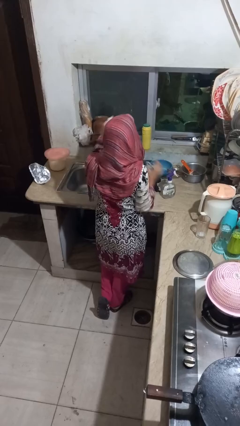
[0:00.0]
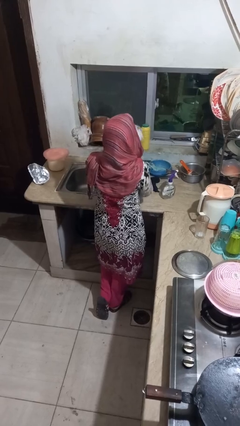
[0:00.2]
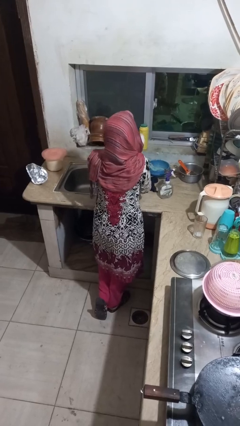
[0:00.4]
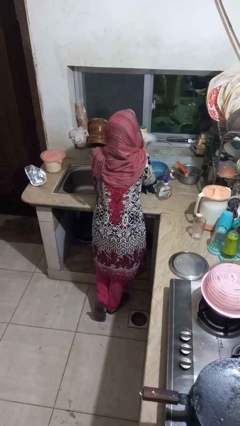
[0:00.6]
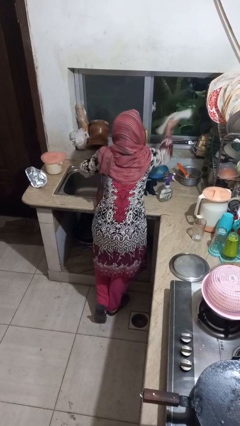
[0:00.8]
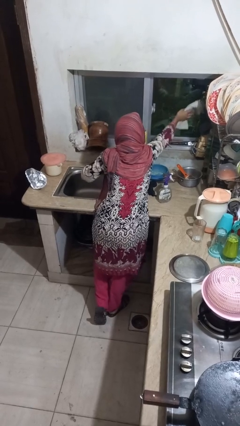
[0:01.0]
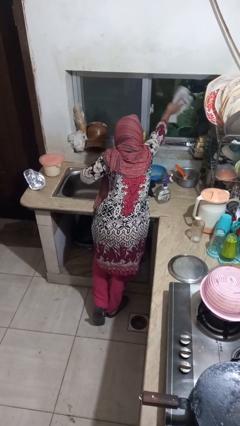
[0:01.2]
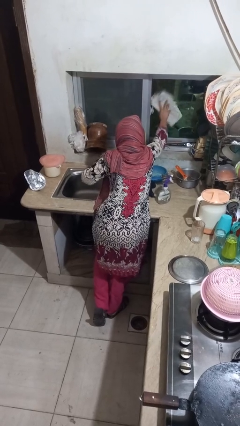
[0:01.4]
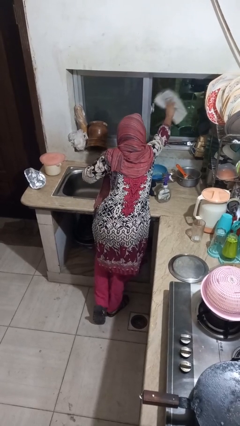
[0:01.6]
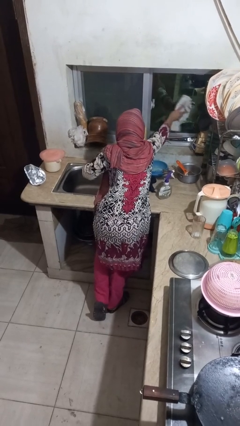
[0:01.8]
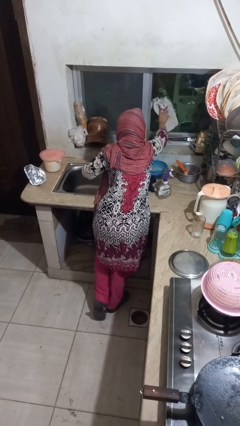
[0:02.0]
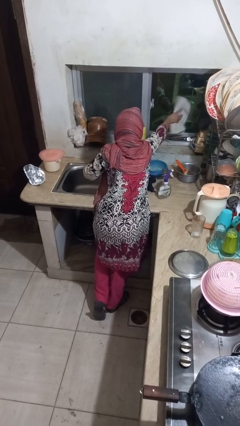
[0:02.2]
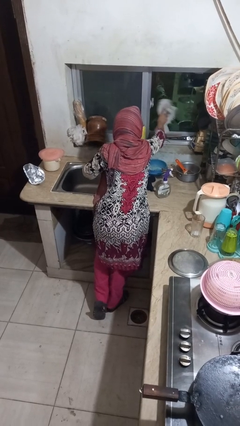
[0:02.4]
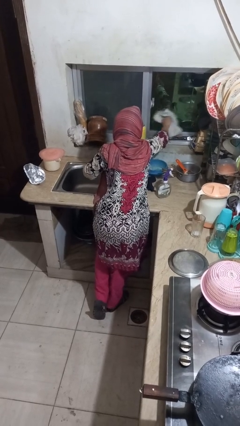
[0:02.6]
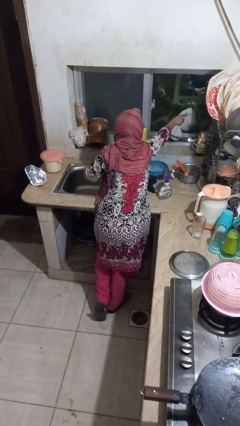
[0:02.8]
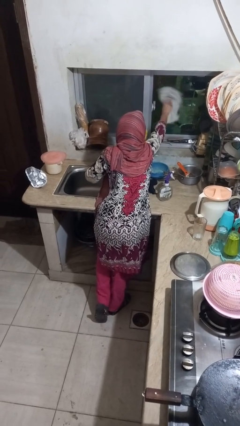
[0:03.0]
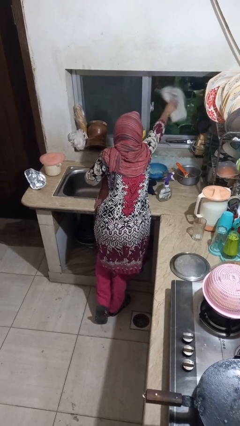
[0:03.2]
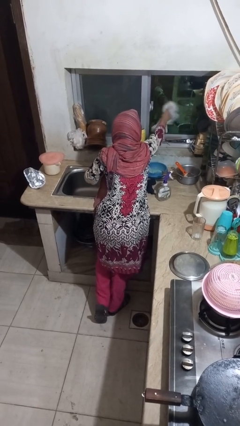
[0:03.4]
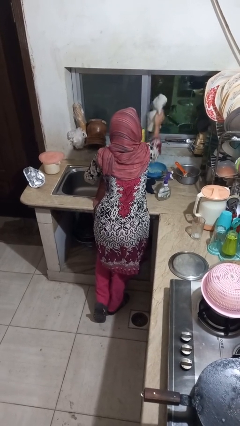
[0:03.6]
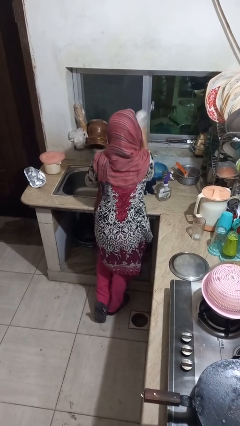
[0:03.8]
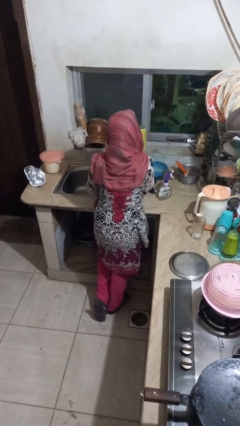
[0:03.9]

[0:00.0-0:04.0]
person washes window

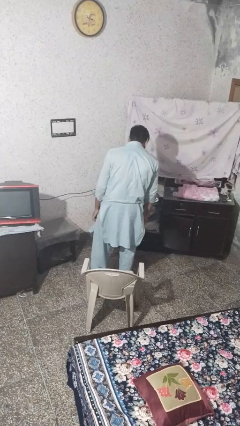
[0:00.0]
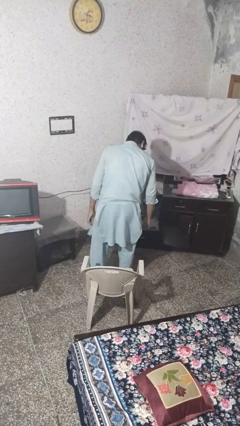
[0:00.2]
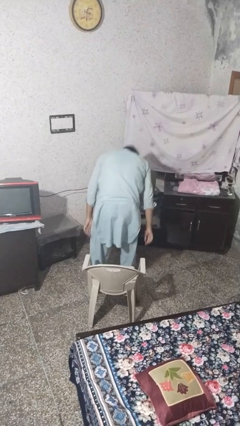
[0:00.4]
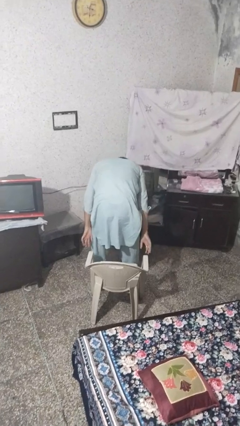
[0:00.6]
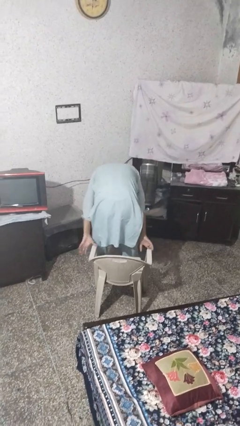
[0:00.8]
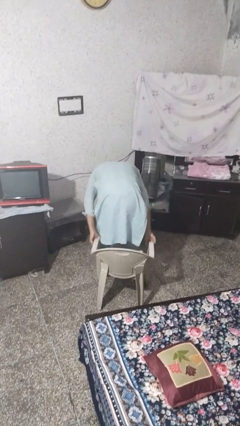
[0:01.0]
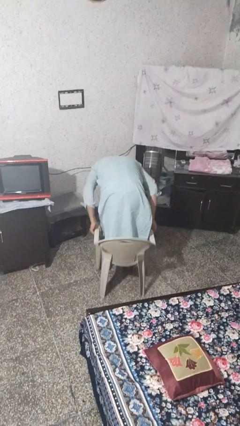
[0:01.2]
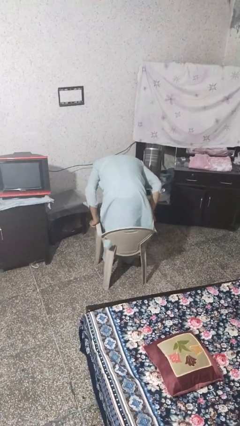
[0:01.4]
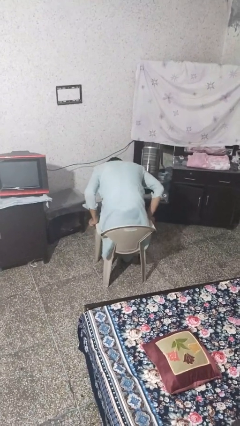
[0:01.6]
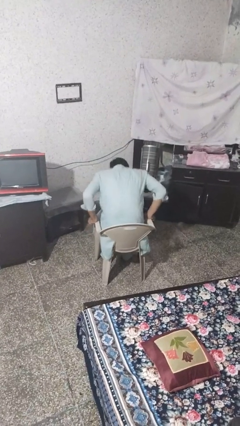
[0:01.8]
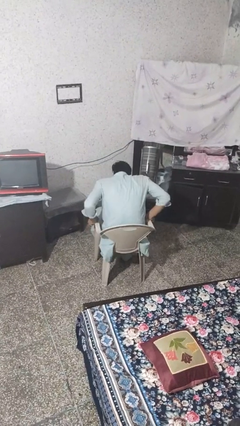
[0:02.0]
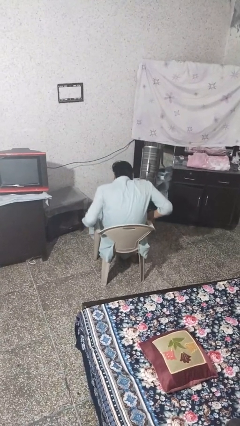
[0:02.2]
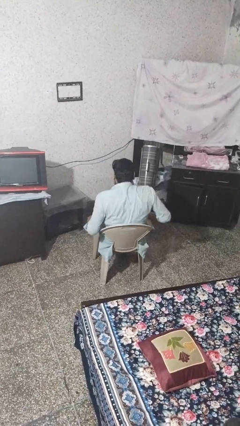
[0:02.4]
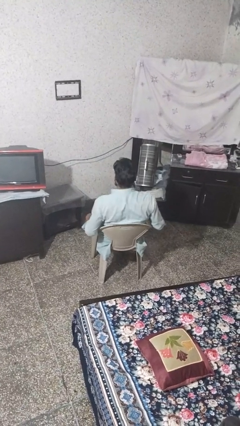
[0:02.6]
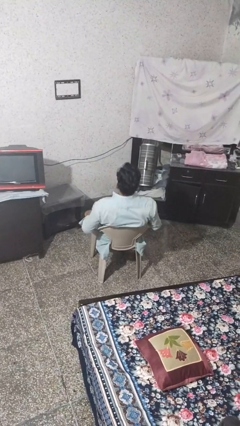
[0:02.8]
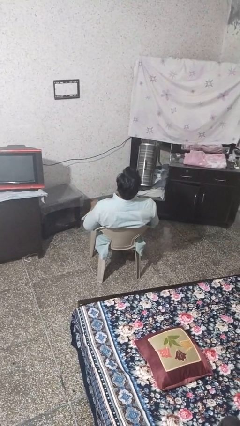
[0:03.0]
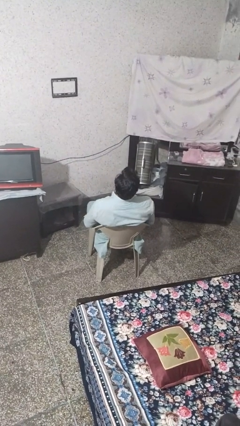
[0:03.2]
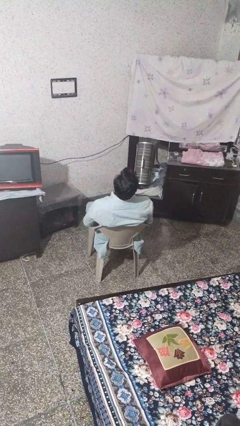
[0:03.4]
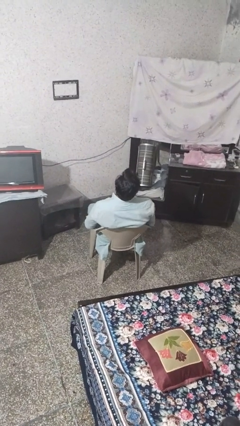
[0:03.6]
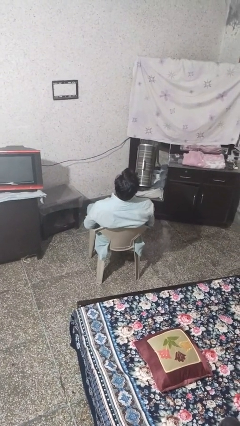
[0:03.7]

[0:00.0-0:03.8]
person sits down

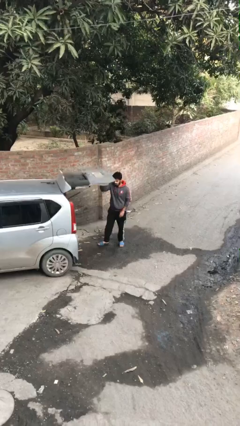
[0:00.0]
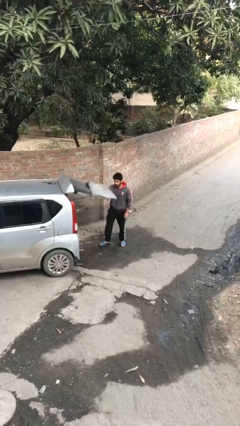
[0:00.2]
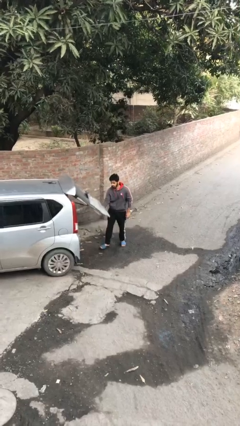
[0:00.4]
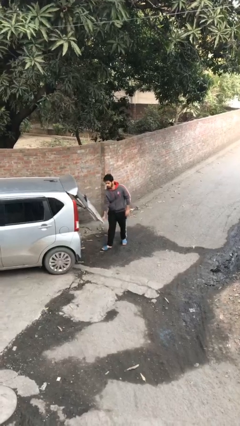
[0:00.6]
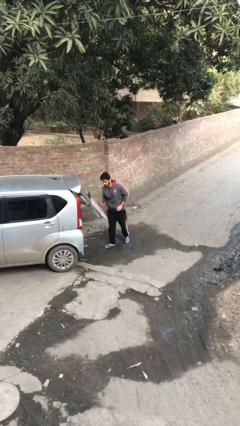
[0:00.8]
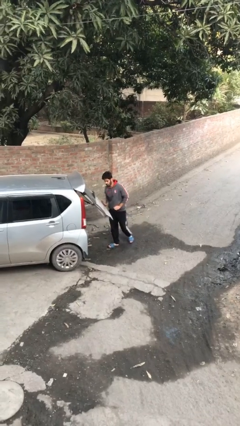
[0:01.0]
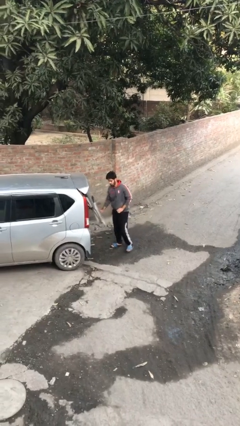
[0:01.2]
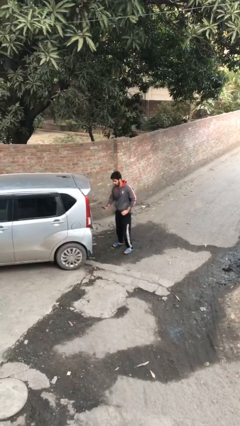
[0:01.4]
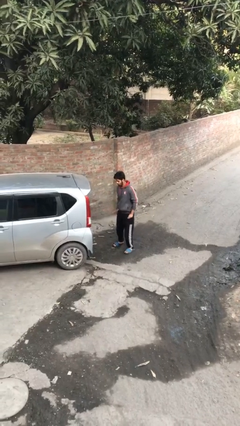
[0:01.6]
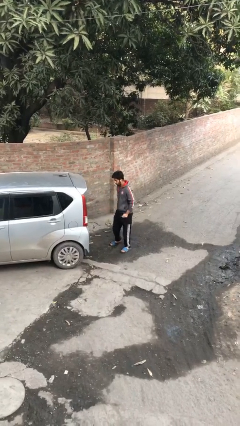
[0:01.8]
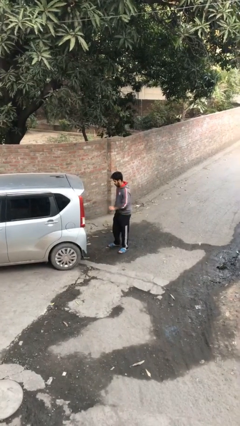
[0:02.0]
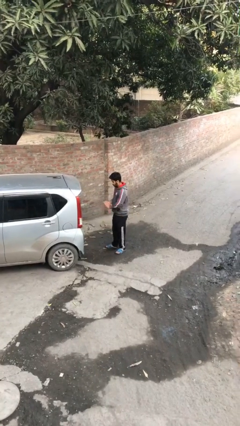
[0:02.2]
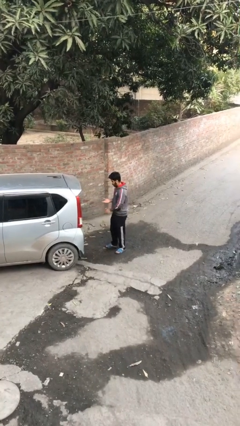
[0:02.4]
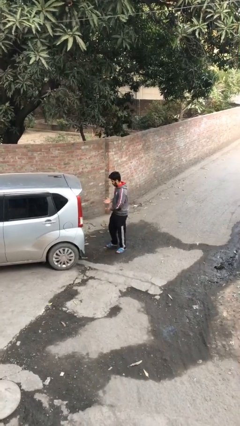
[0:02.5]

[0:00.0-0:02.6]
person closes car trunk

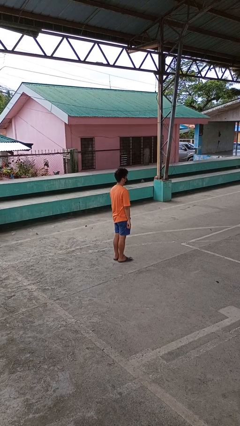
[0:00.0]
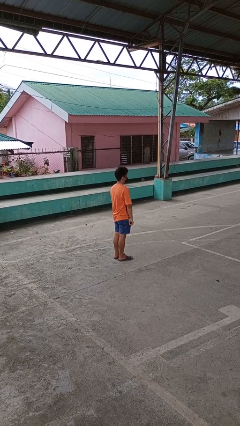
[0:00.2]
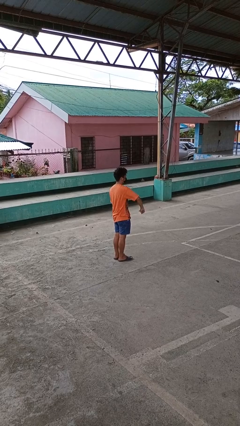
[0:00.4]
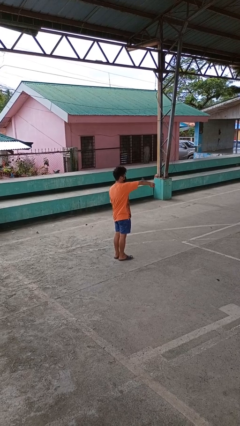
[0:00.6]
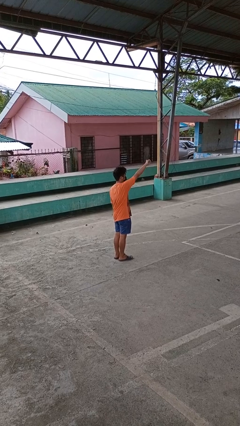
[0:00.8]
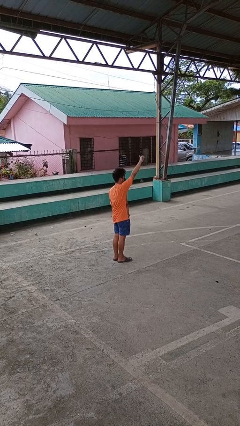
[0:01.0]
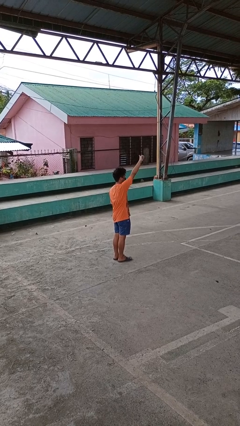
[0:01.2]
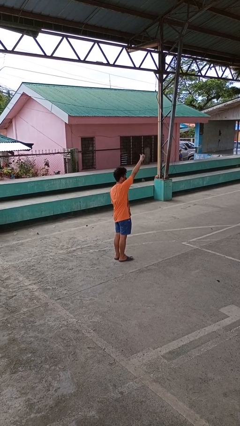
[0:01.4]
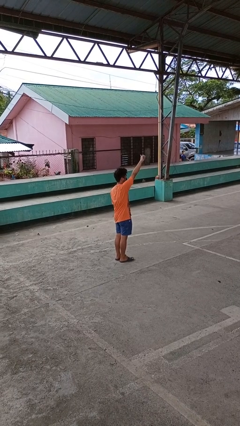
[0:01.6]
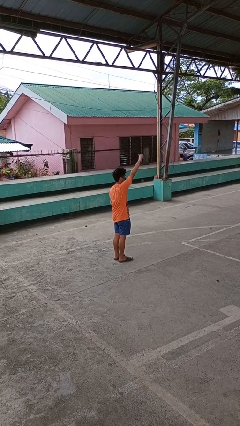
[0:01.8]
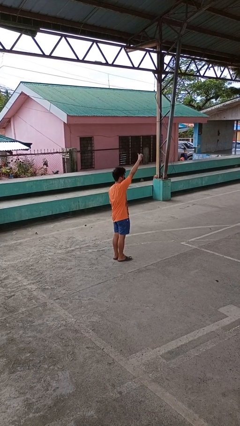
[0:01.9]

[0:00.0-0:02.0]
person gestures swipe up

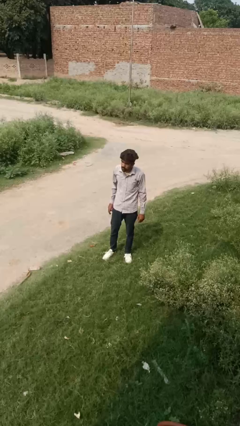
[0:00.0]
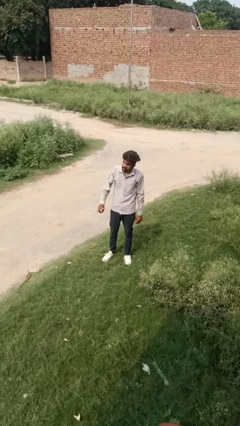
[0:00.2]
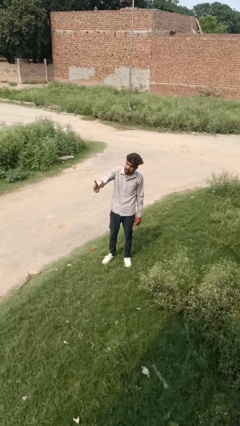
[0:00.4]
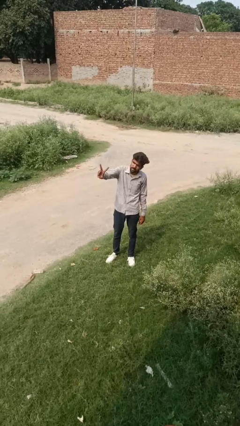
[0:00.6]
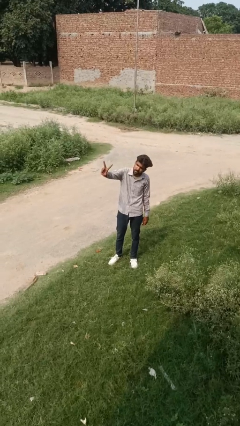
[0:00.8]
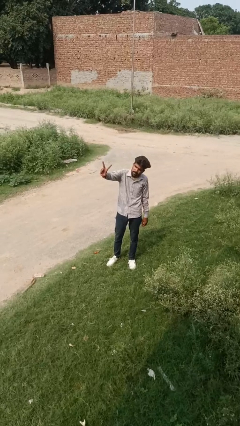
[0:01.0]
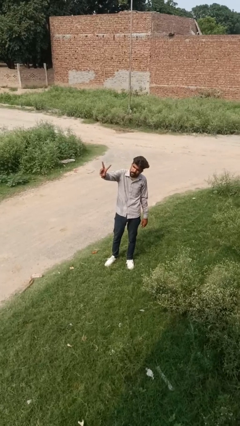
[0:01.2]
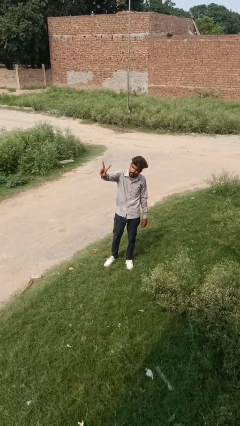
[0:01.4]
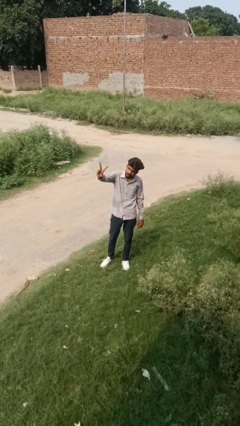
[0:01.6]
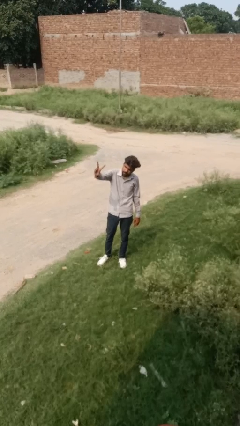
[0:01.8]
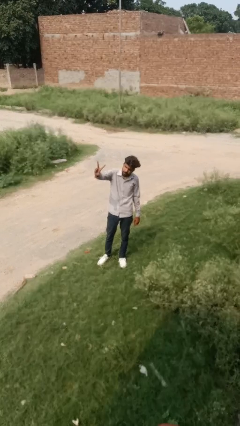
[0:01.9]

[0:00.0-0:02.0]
person gestures peace

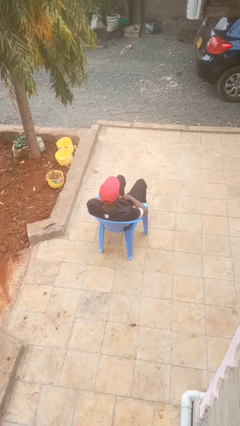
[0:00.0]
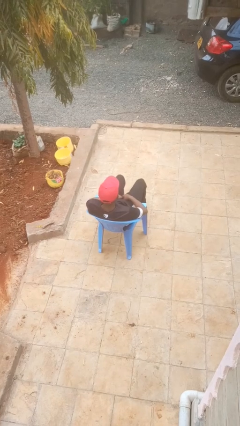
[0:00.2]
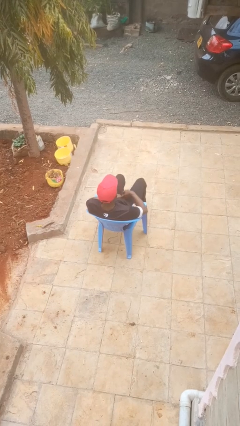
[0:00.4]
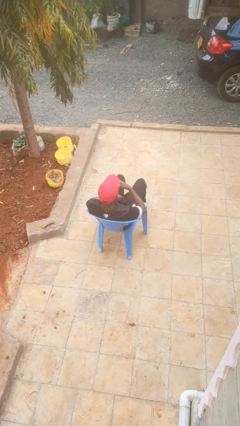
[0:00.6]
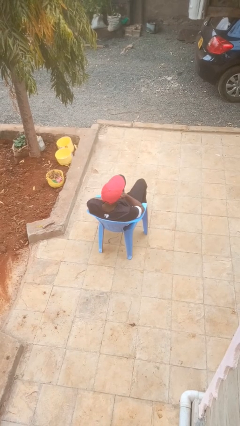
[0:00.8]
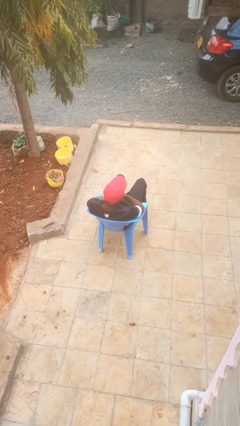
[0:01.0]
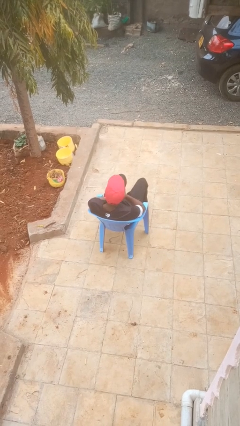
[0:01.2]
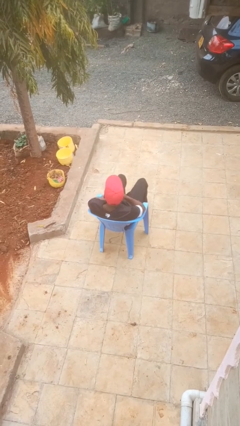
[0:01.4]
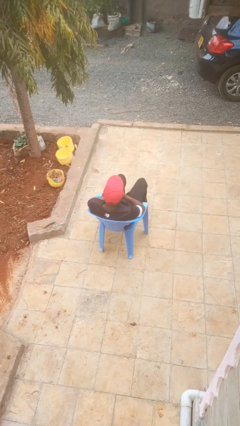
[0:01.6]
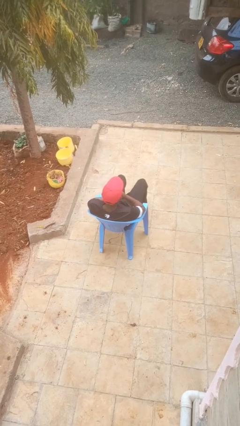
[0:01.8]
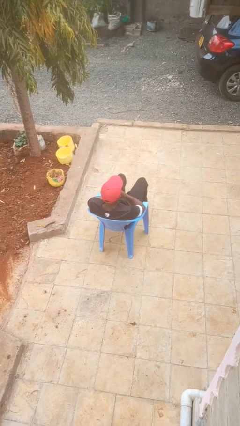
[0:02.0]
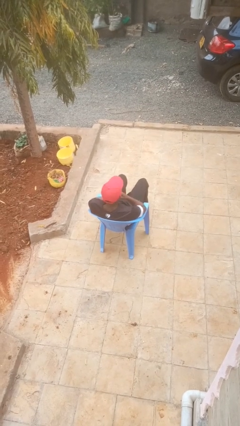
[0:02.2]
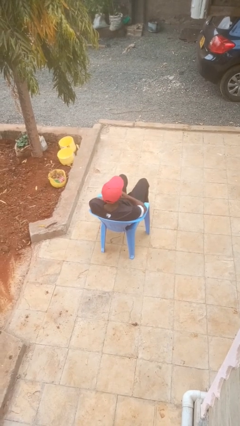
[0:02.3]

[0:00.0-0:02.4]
person strokes chin

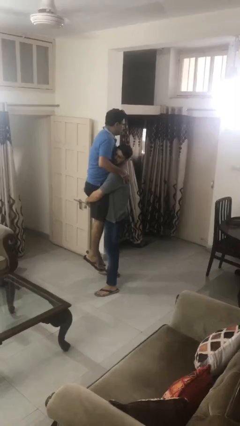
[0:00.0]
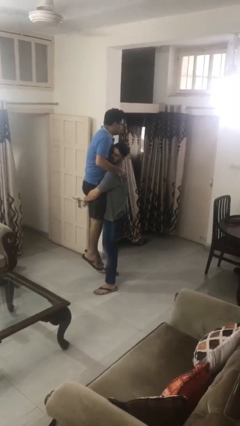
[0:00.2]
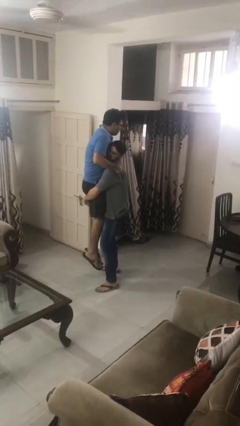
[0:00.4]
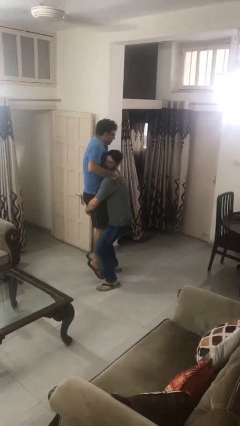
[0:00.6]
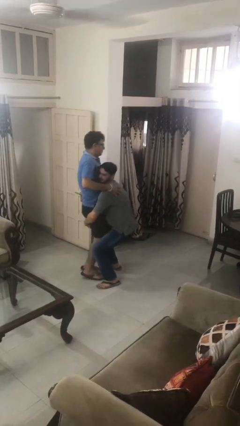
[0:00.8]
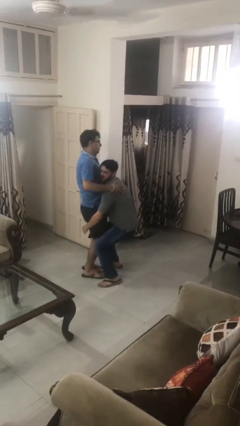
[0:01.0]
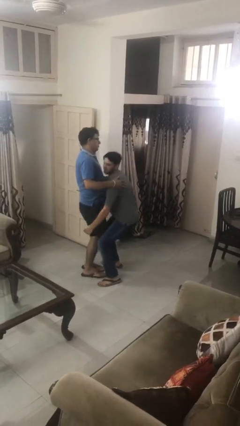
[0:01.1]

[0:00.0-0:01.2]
person puts down person
